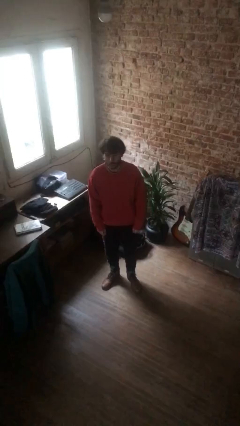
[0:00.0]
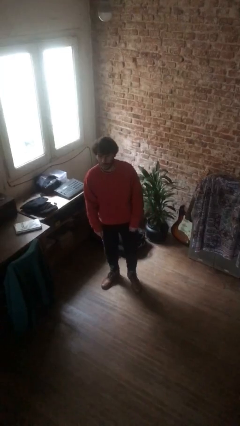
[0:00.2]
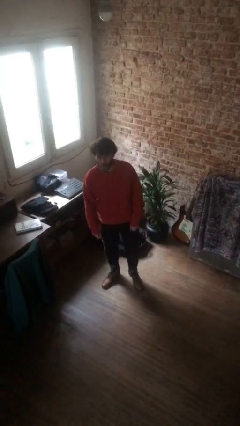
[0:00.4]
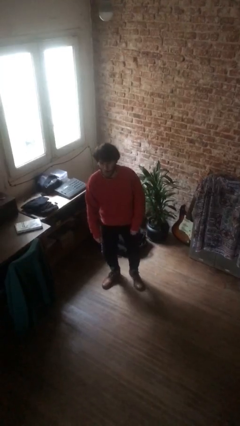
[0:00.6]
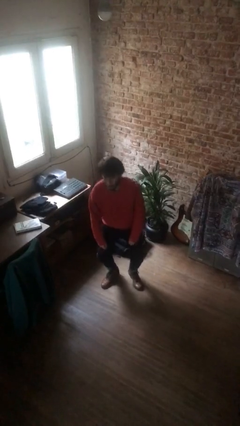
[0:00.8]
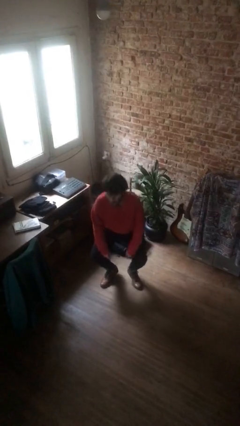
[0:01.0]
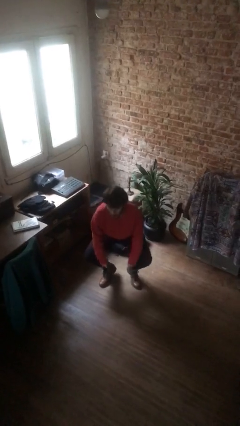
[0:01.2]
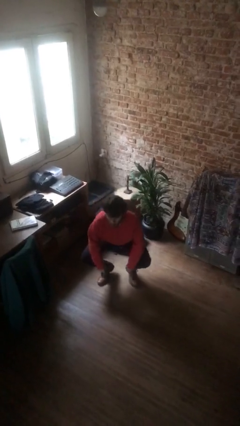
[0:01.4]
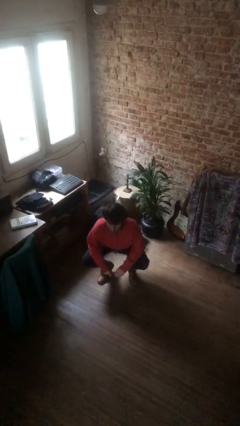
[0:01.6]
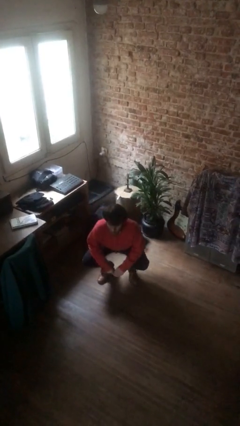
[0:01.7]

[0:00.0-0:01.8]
person squats

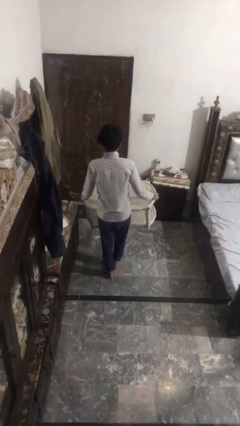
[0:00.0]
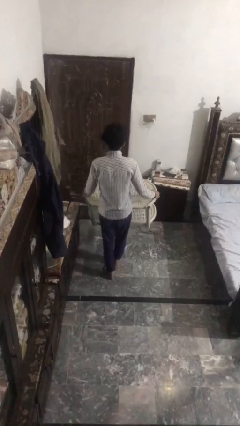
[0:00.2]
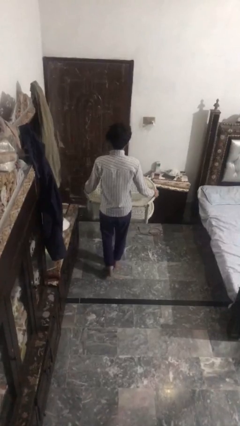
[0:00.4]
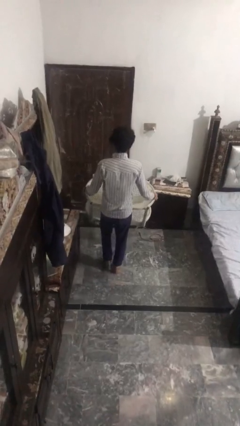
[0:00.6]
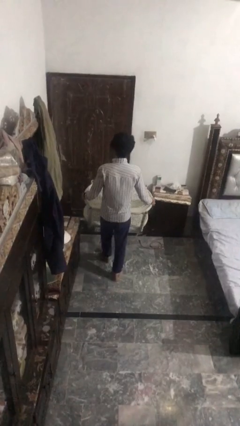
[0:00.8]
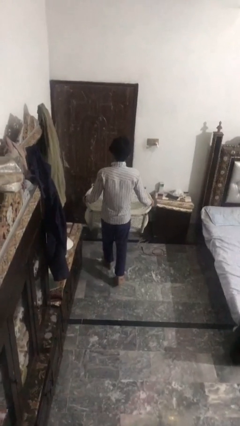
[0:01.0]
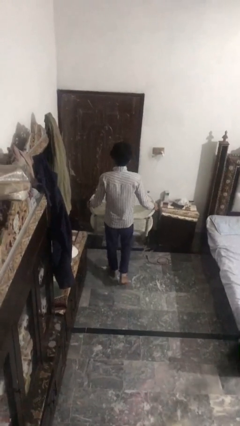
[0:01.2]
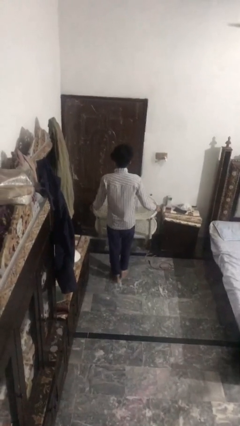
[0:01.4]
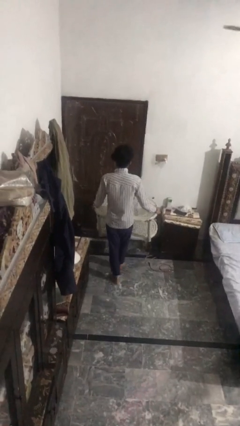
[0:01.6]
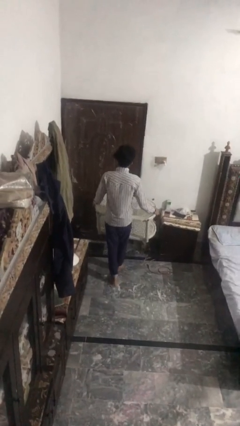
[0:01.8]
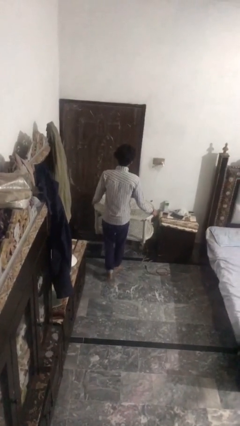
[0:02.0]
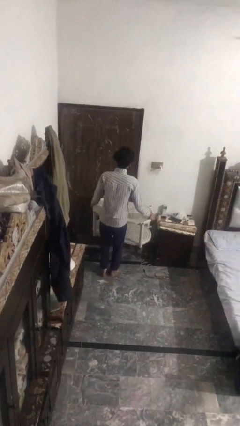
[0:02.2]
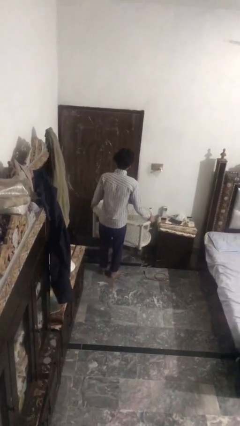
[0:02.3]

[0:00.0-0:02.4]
person carries furniture

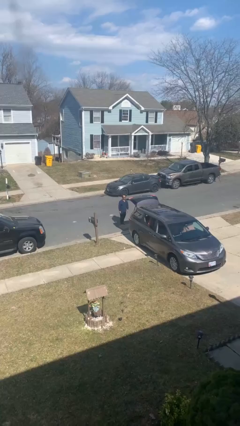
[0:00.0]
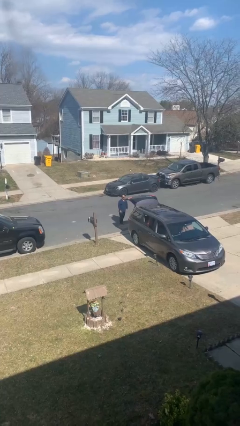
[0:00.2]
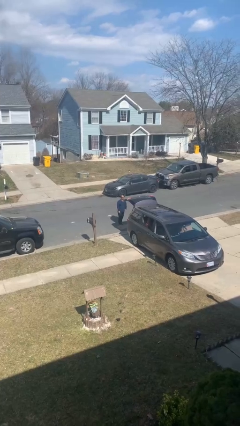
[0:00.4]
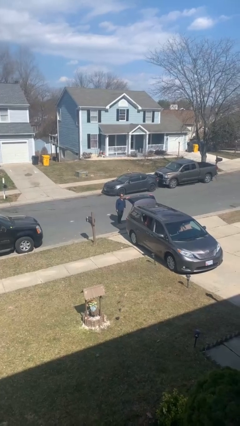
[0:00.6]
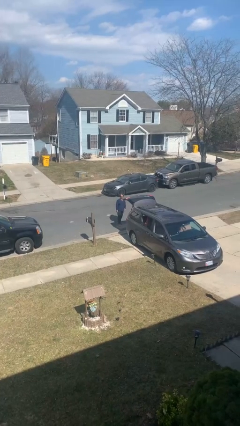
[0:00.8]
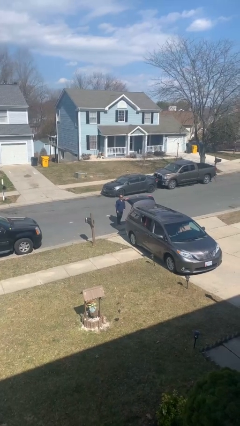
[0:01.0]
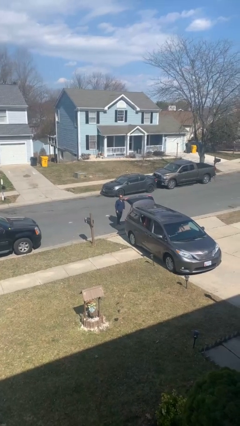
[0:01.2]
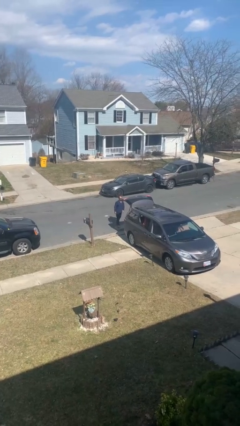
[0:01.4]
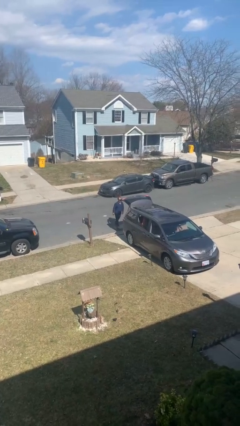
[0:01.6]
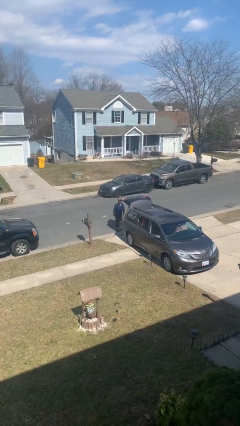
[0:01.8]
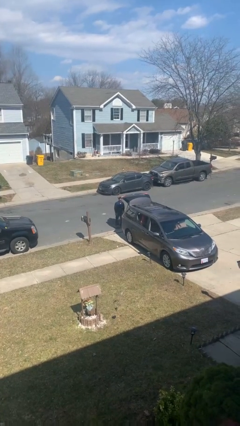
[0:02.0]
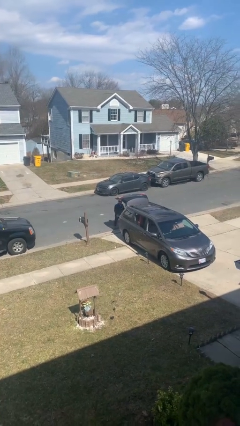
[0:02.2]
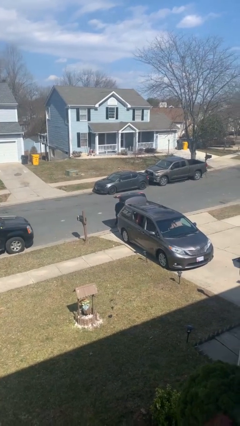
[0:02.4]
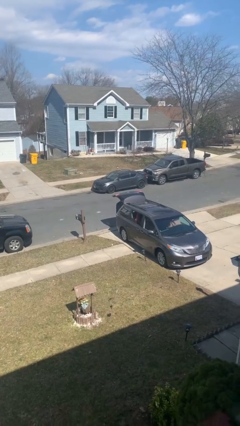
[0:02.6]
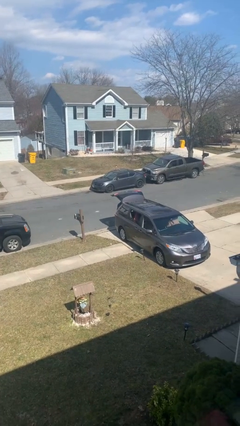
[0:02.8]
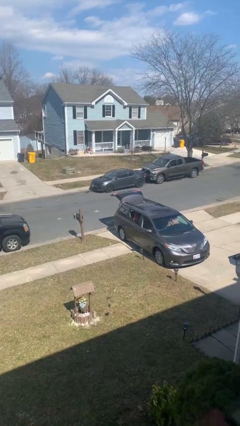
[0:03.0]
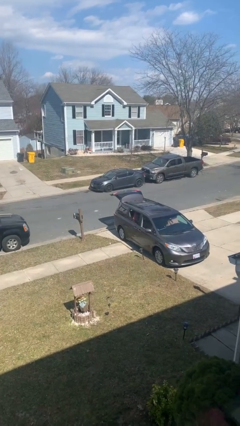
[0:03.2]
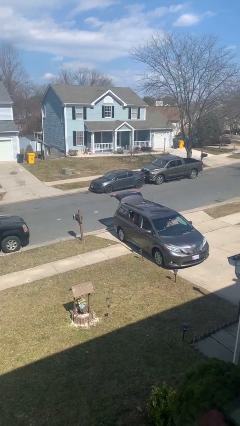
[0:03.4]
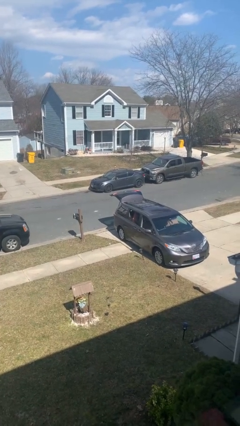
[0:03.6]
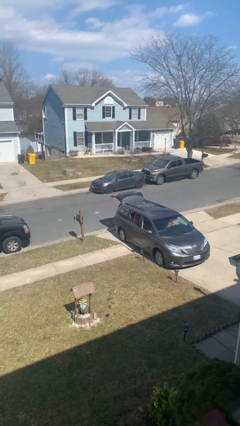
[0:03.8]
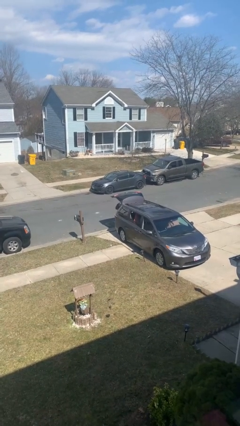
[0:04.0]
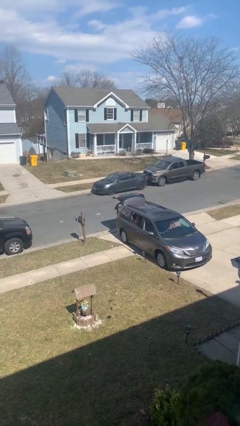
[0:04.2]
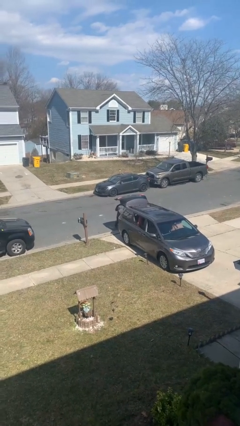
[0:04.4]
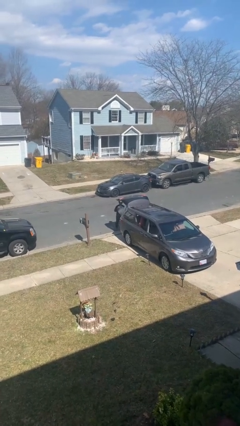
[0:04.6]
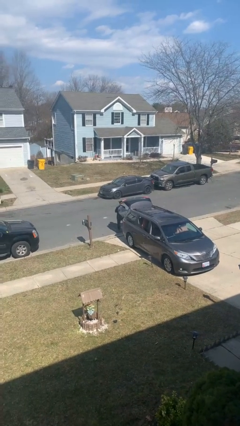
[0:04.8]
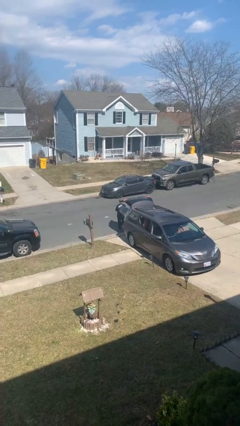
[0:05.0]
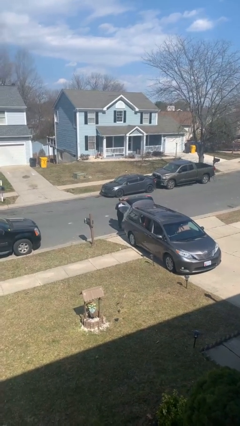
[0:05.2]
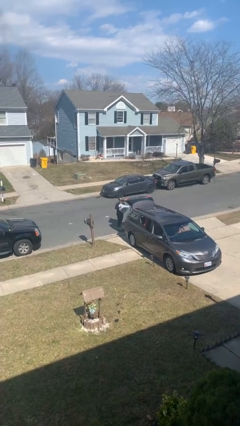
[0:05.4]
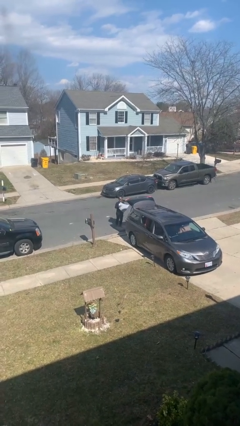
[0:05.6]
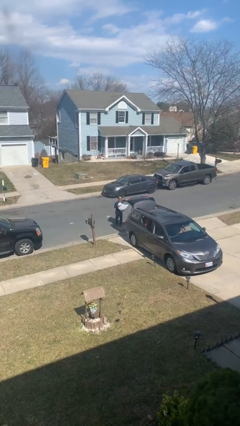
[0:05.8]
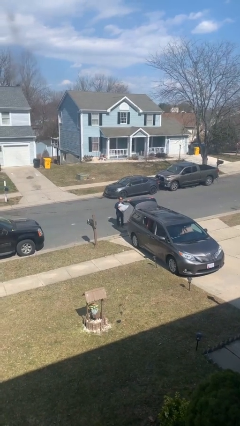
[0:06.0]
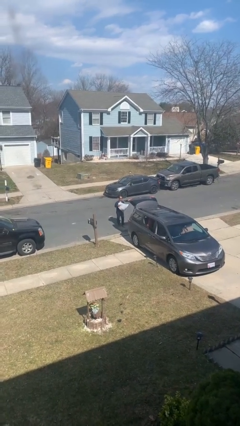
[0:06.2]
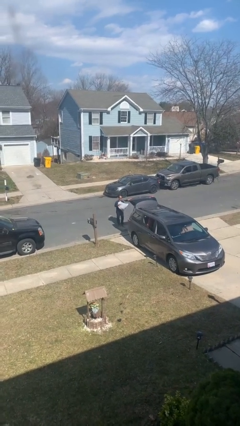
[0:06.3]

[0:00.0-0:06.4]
person unloads car

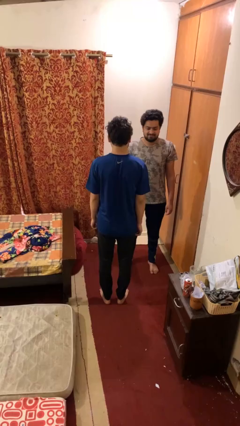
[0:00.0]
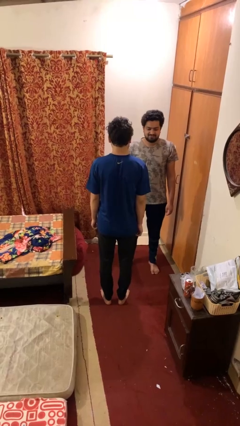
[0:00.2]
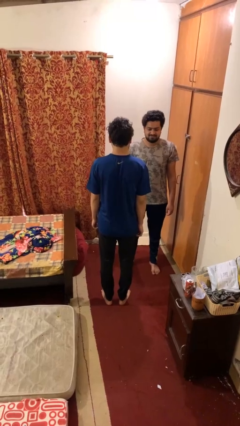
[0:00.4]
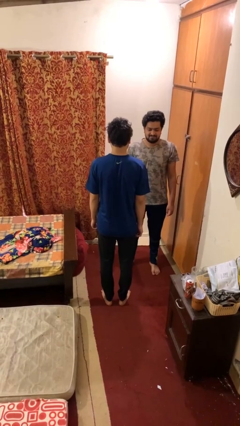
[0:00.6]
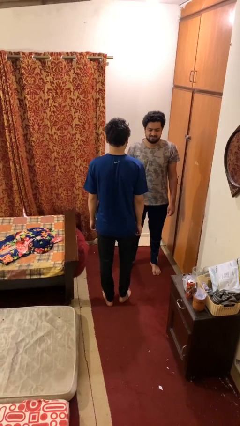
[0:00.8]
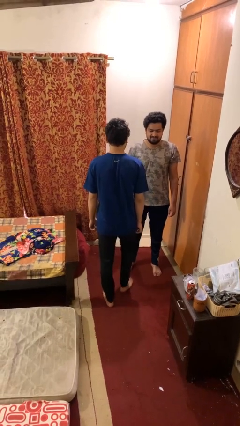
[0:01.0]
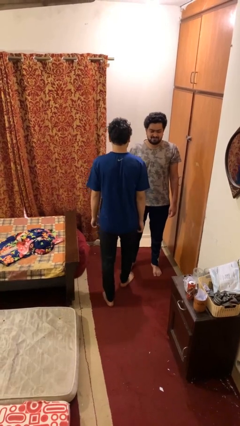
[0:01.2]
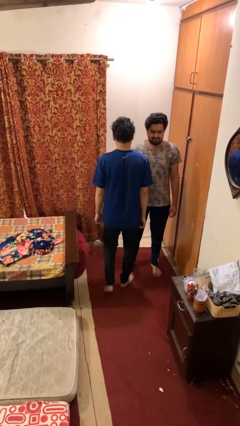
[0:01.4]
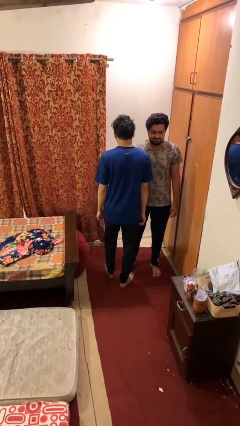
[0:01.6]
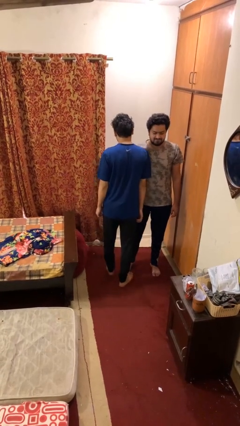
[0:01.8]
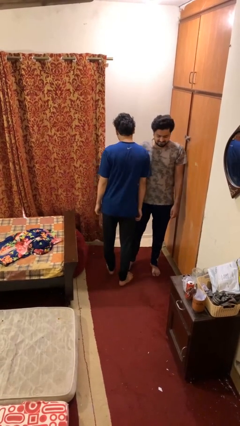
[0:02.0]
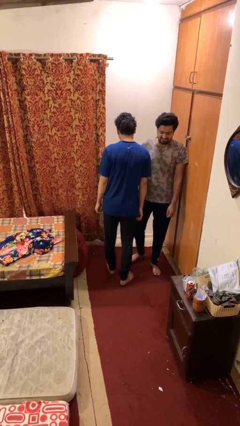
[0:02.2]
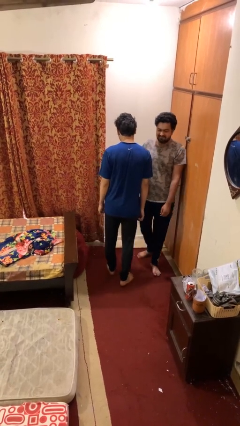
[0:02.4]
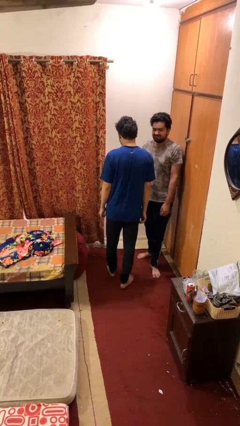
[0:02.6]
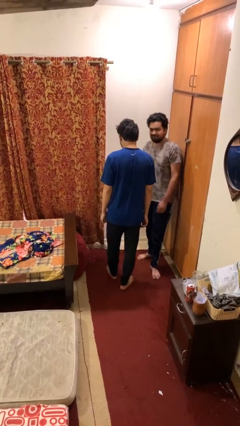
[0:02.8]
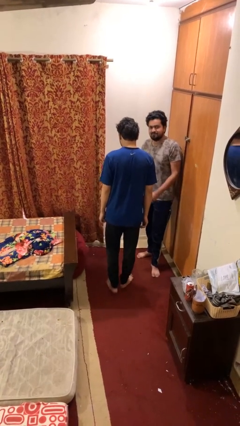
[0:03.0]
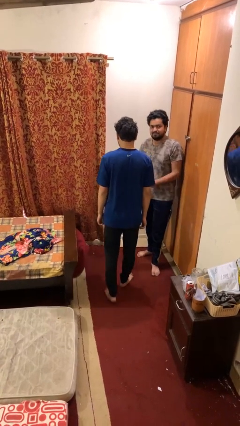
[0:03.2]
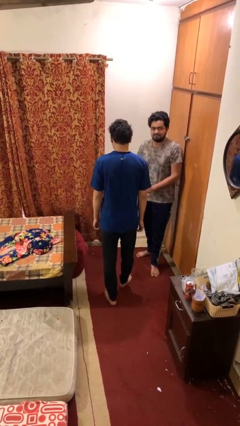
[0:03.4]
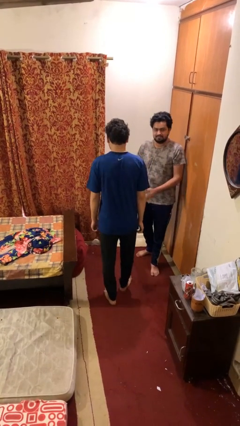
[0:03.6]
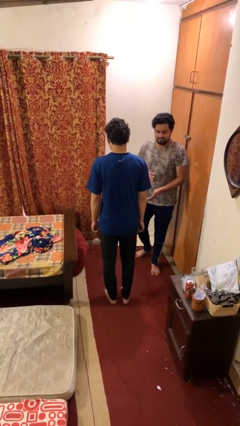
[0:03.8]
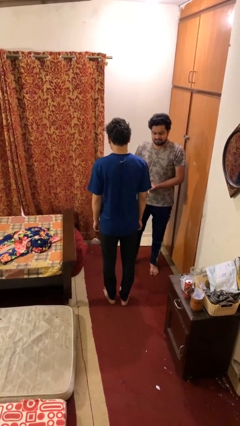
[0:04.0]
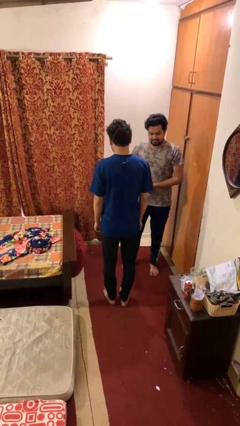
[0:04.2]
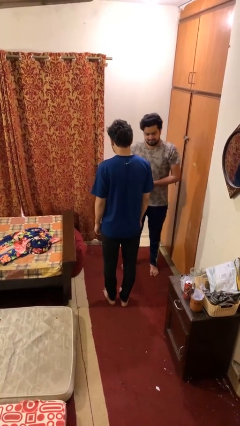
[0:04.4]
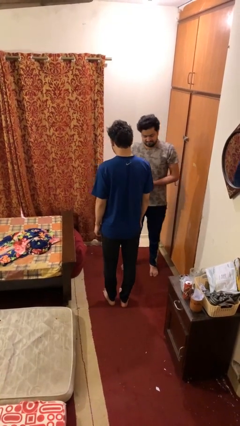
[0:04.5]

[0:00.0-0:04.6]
person bumps into person

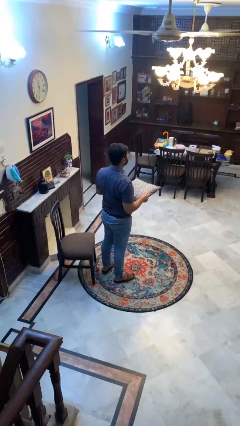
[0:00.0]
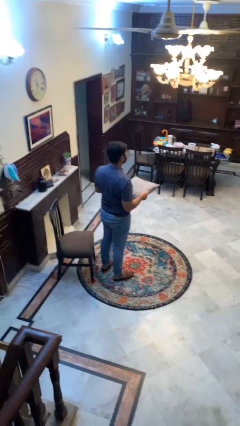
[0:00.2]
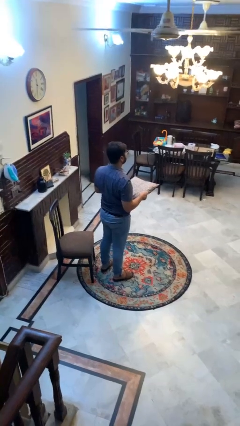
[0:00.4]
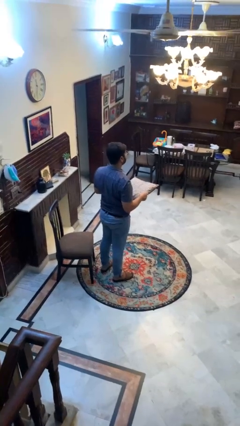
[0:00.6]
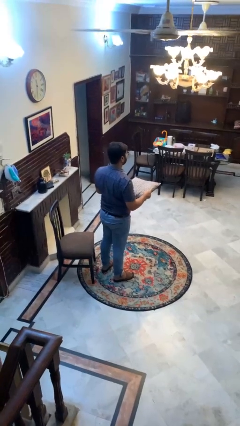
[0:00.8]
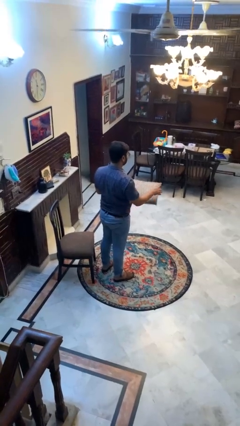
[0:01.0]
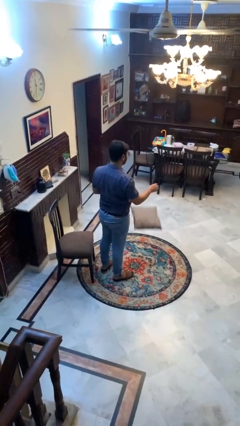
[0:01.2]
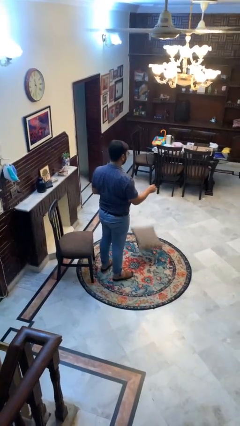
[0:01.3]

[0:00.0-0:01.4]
person drops object

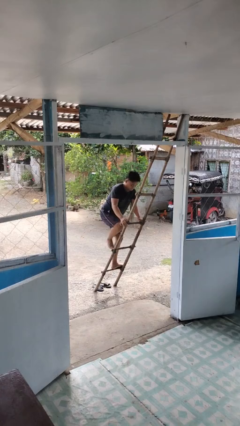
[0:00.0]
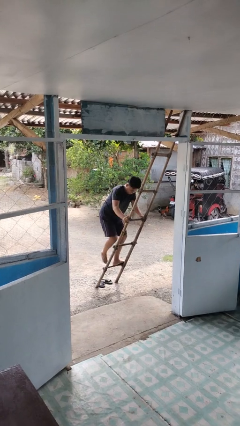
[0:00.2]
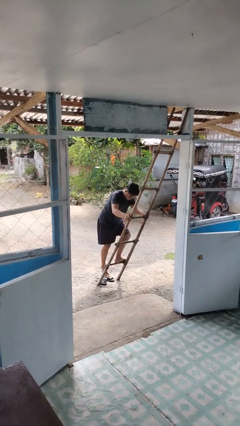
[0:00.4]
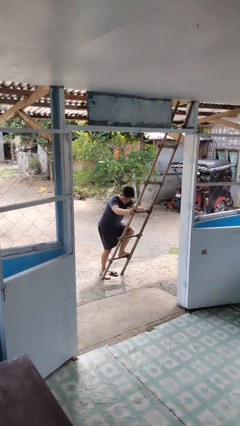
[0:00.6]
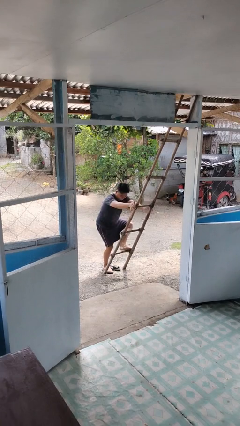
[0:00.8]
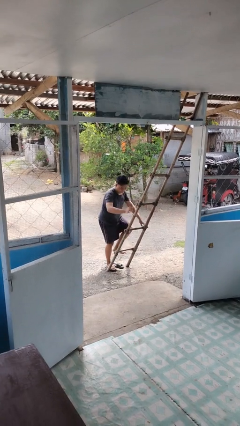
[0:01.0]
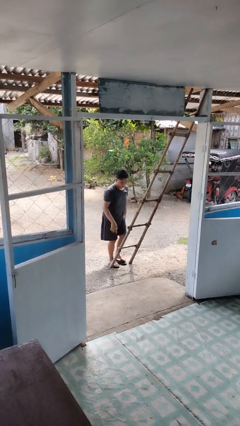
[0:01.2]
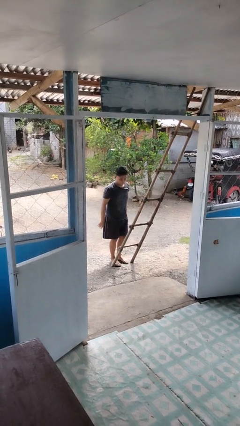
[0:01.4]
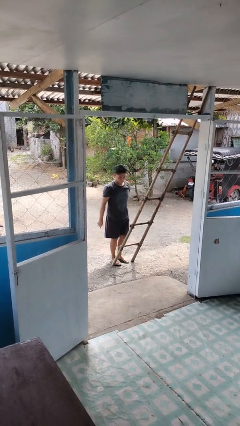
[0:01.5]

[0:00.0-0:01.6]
person climbs down ladder
